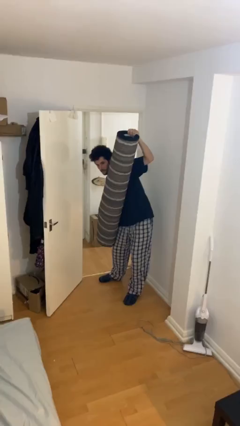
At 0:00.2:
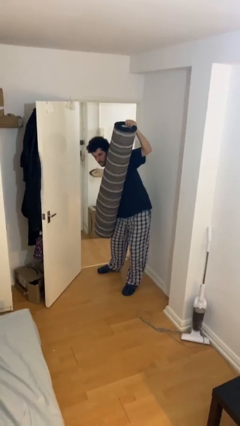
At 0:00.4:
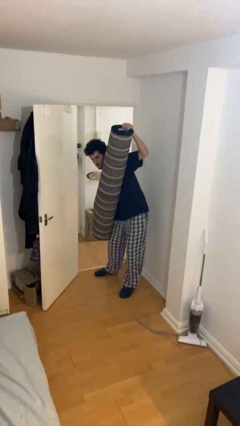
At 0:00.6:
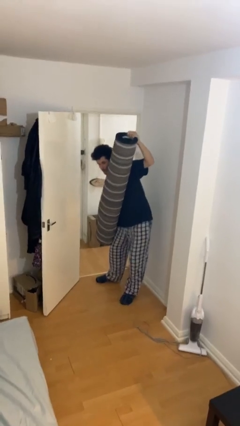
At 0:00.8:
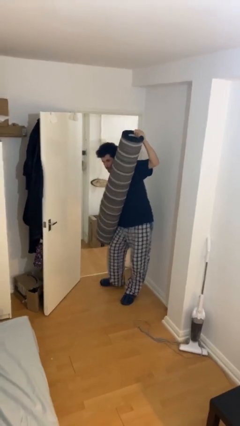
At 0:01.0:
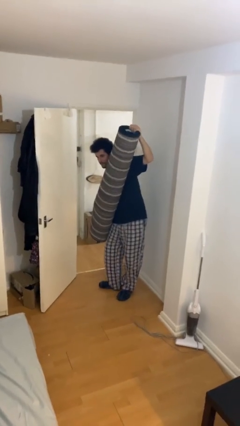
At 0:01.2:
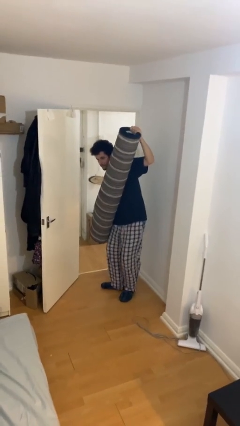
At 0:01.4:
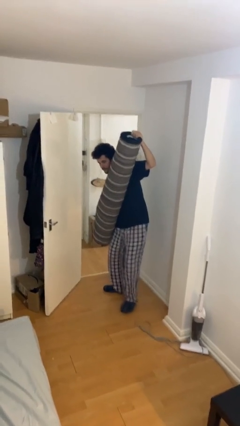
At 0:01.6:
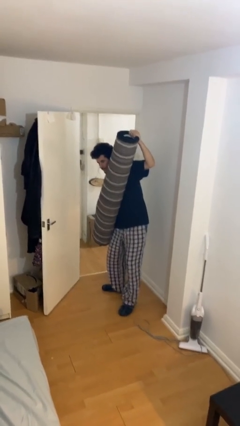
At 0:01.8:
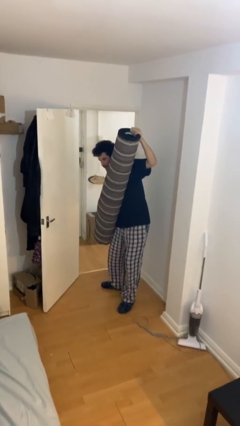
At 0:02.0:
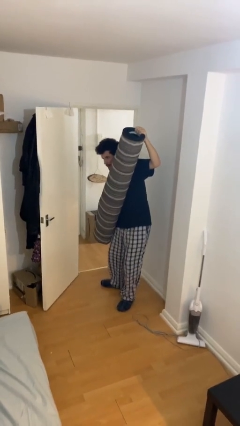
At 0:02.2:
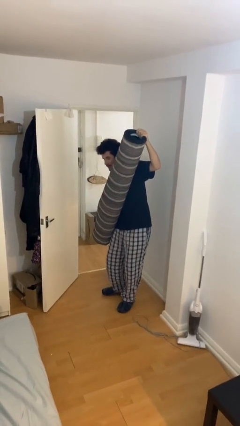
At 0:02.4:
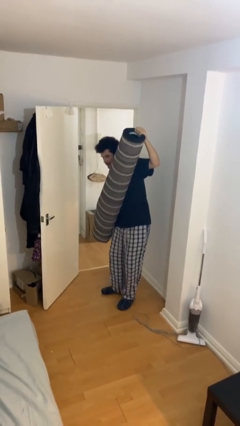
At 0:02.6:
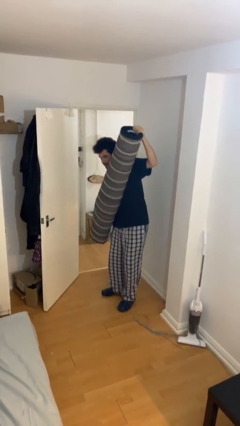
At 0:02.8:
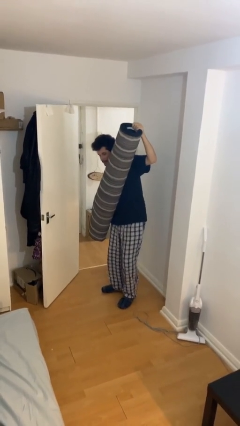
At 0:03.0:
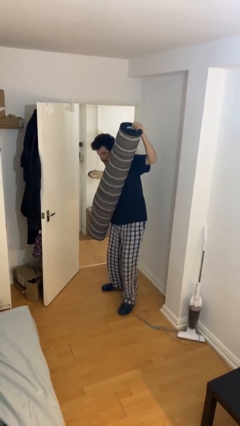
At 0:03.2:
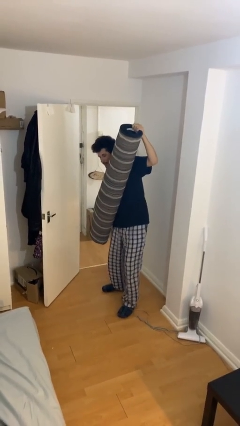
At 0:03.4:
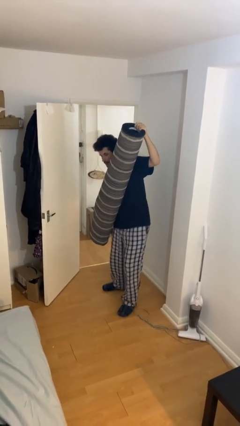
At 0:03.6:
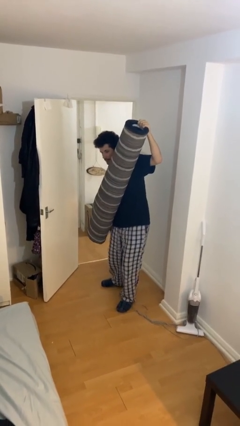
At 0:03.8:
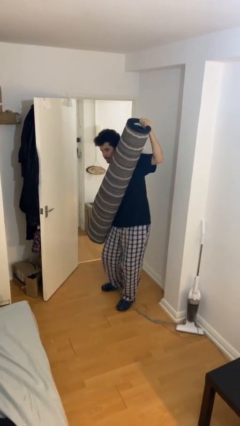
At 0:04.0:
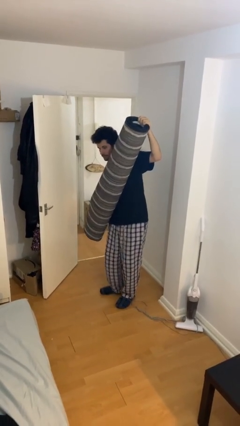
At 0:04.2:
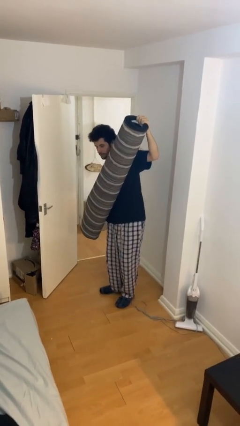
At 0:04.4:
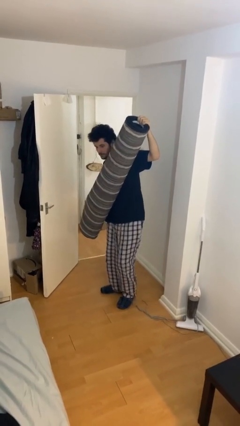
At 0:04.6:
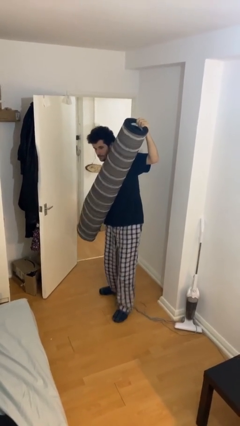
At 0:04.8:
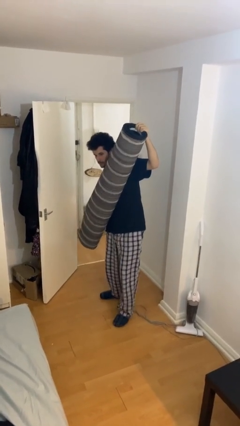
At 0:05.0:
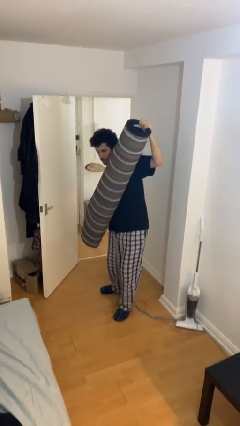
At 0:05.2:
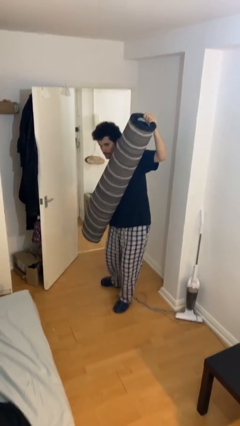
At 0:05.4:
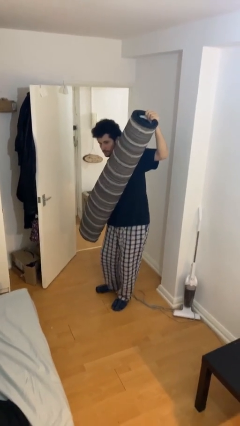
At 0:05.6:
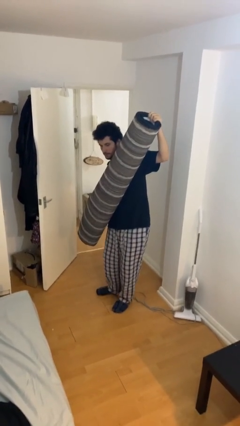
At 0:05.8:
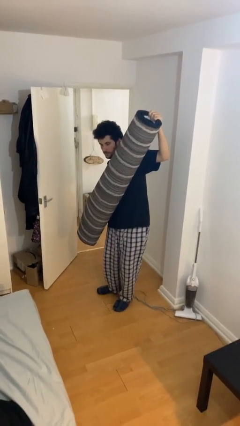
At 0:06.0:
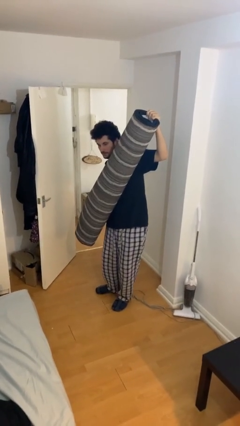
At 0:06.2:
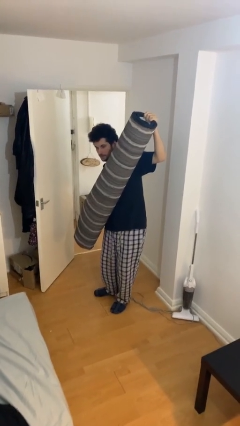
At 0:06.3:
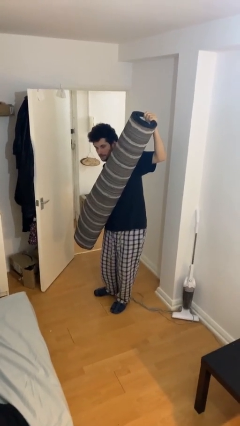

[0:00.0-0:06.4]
person carries heavy object

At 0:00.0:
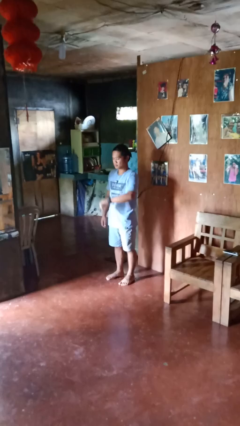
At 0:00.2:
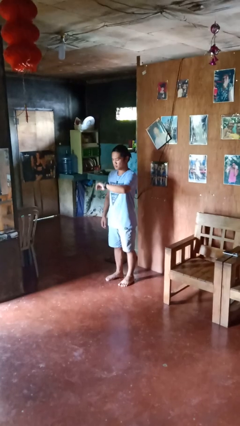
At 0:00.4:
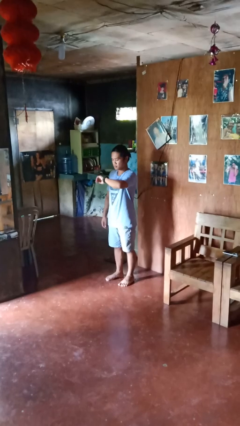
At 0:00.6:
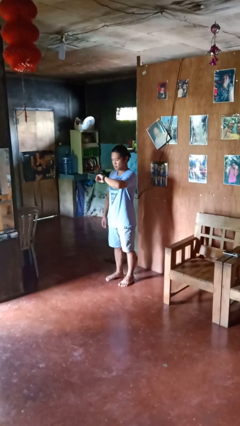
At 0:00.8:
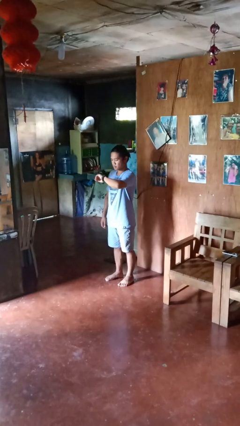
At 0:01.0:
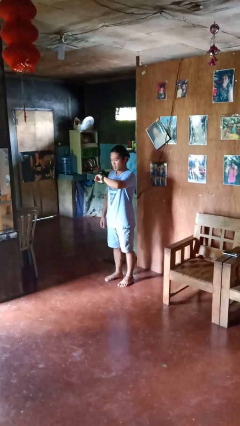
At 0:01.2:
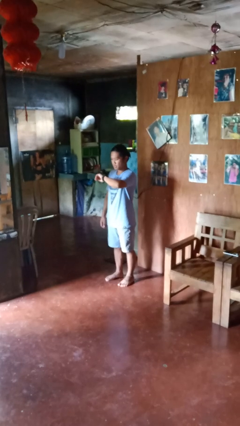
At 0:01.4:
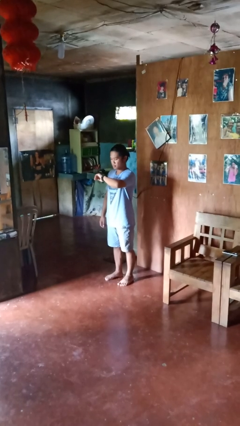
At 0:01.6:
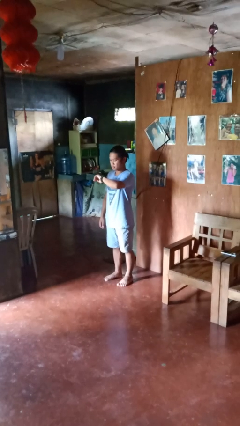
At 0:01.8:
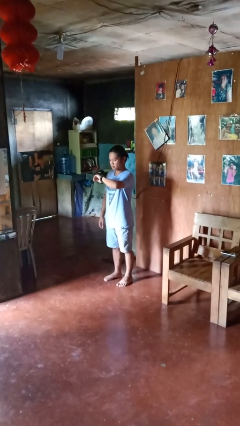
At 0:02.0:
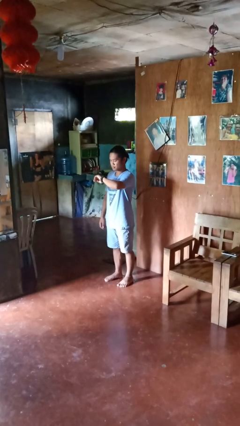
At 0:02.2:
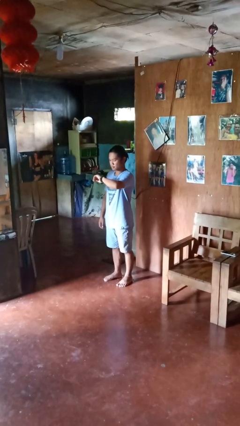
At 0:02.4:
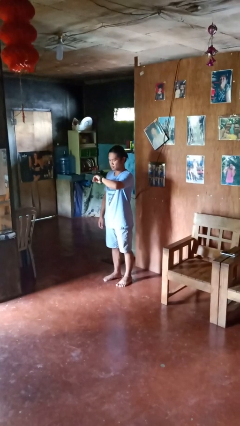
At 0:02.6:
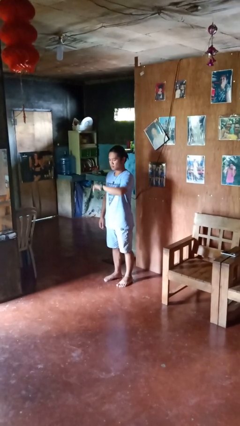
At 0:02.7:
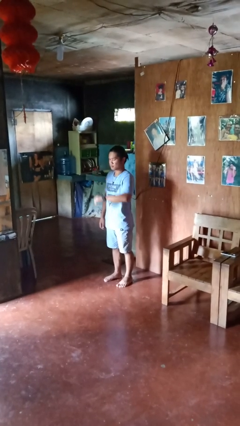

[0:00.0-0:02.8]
person looks at wristwatch

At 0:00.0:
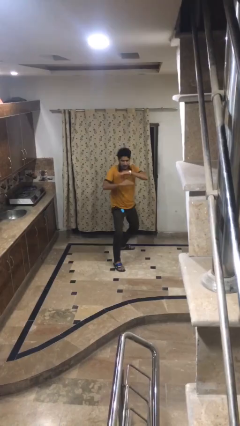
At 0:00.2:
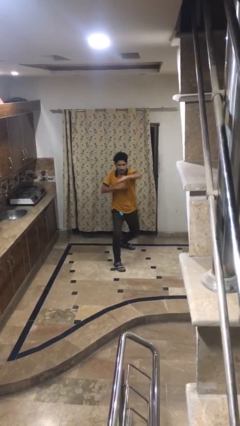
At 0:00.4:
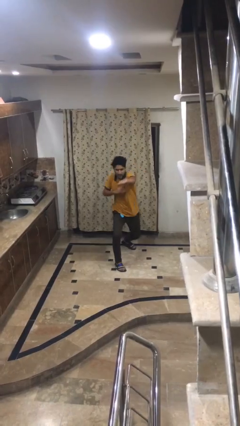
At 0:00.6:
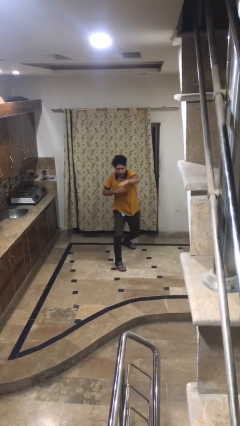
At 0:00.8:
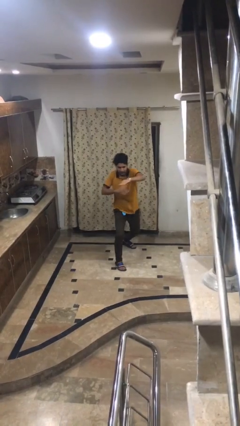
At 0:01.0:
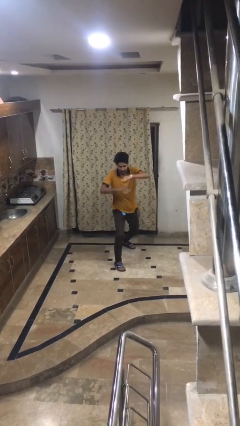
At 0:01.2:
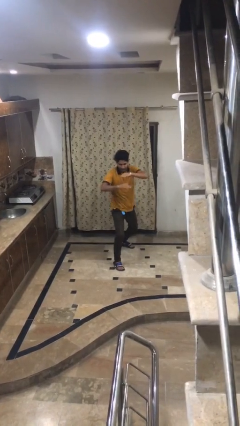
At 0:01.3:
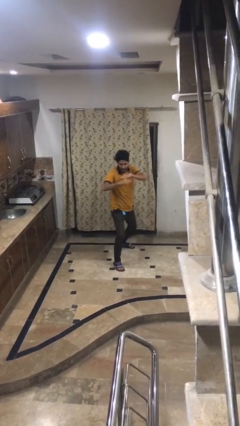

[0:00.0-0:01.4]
person karate chop

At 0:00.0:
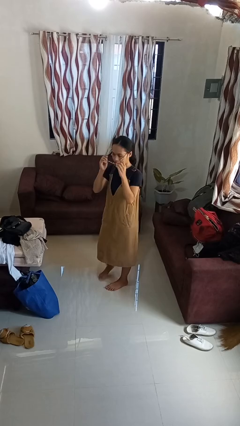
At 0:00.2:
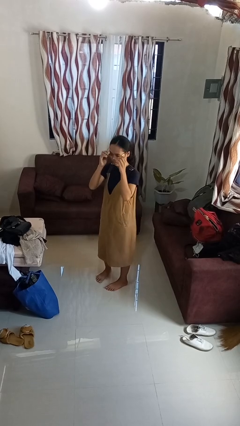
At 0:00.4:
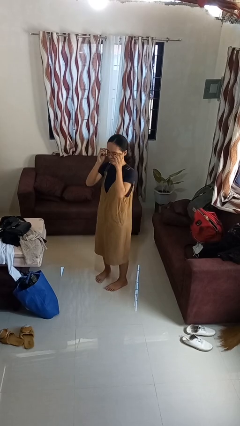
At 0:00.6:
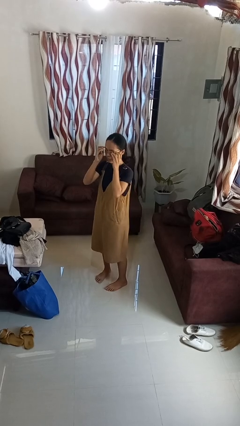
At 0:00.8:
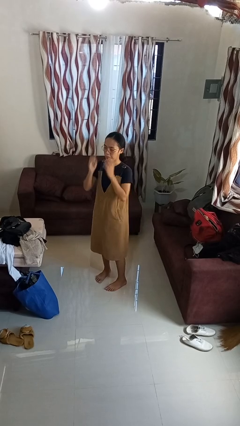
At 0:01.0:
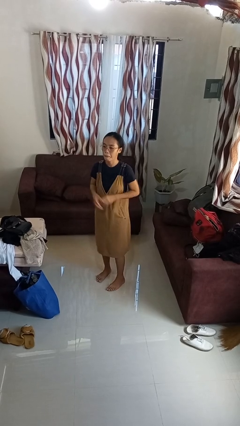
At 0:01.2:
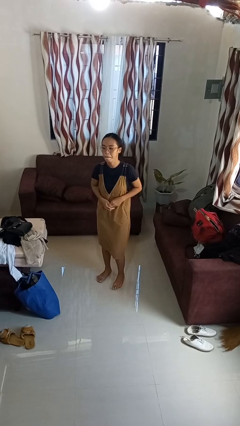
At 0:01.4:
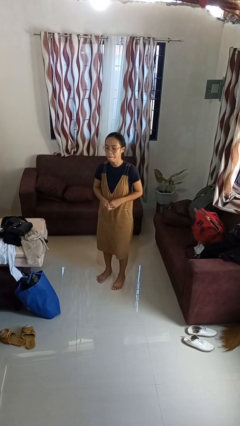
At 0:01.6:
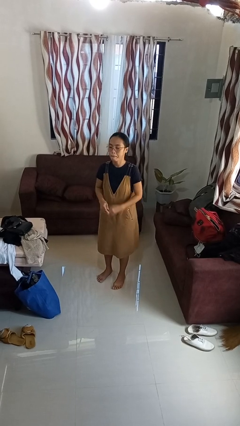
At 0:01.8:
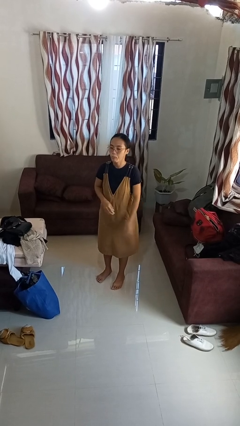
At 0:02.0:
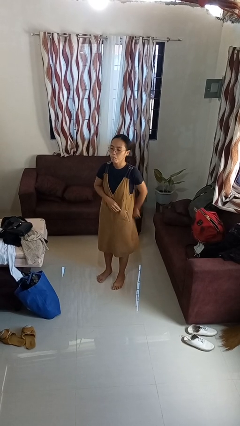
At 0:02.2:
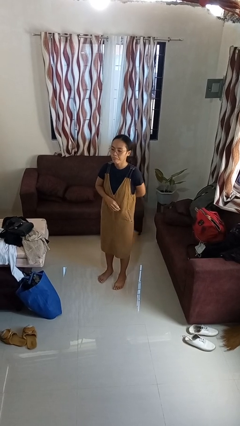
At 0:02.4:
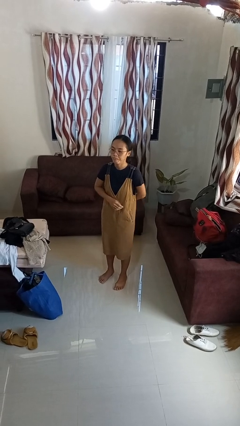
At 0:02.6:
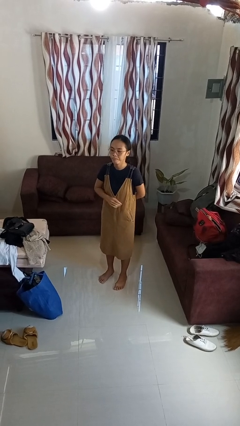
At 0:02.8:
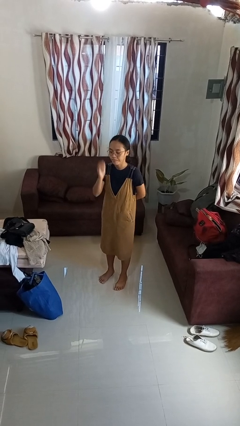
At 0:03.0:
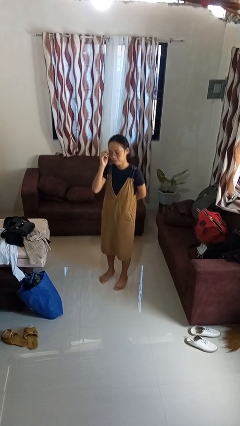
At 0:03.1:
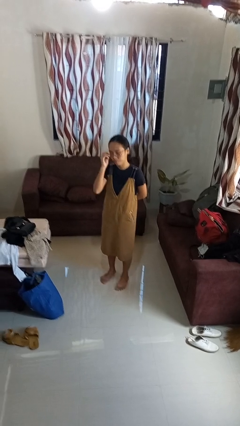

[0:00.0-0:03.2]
person puts on glasses

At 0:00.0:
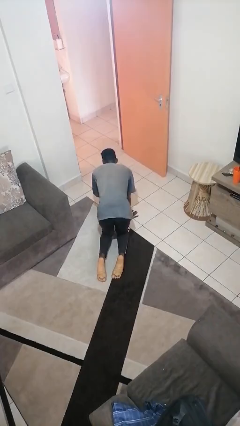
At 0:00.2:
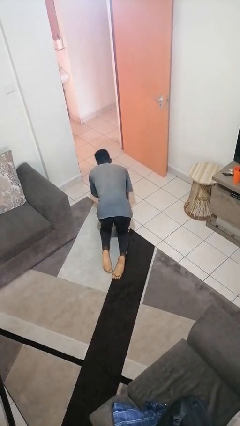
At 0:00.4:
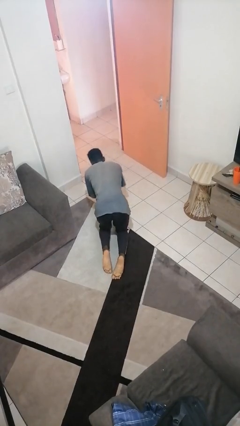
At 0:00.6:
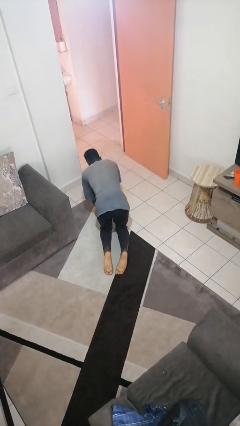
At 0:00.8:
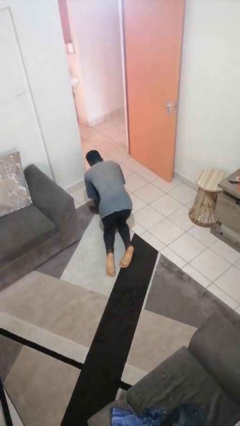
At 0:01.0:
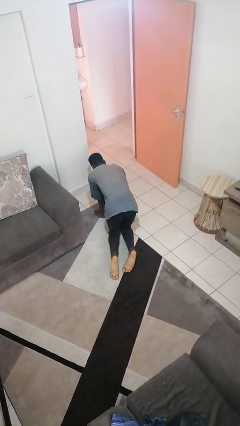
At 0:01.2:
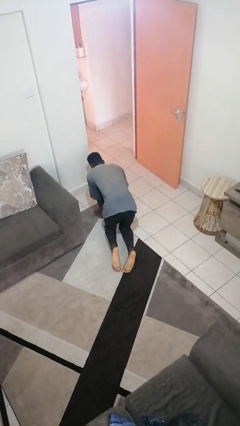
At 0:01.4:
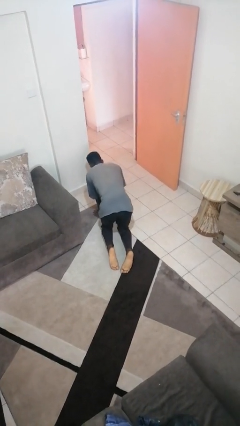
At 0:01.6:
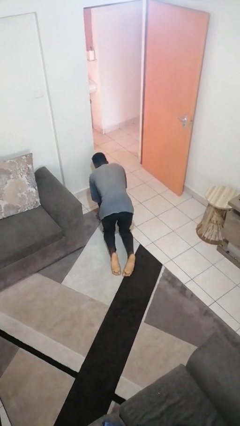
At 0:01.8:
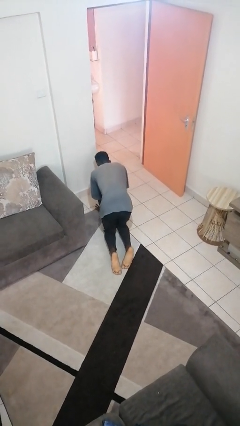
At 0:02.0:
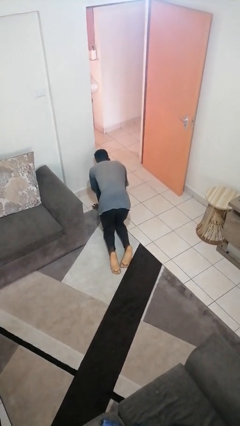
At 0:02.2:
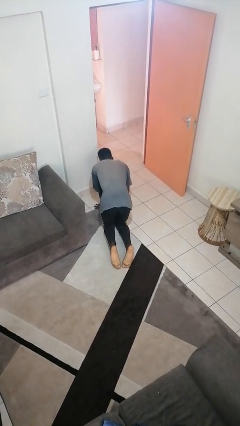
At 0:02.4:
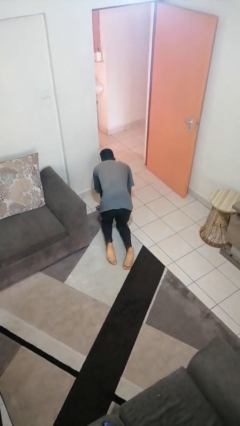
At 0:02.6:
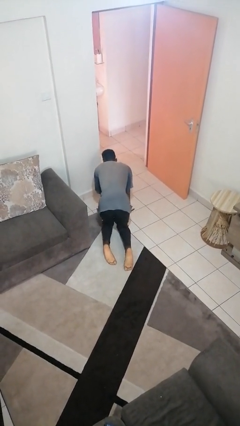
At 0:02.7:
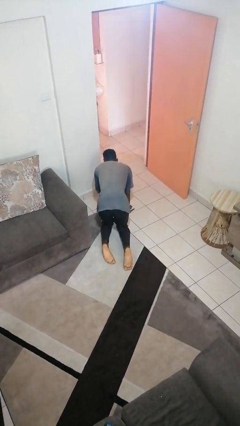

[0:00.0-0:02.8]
person crawls

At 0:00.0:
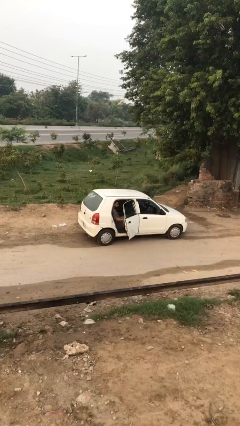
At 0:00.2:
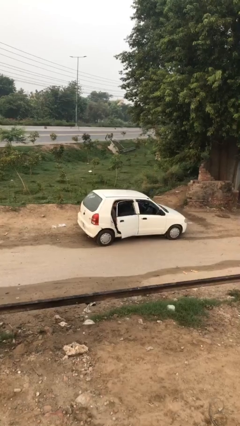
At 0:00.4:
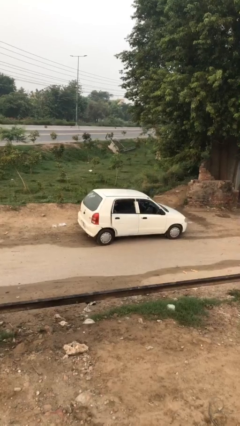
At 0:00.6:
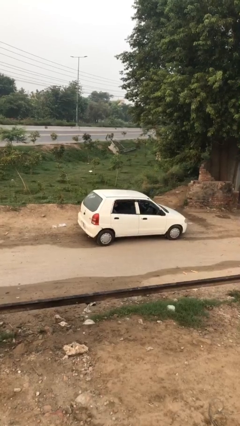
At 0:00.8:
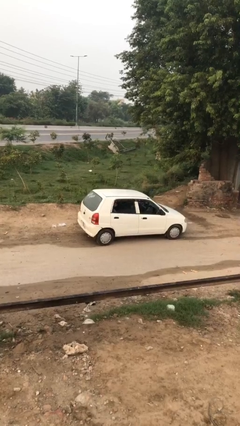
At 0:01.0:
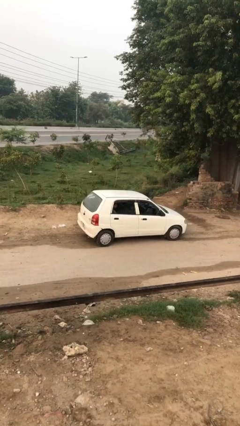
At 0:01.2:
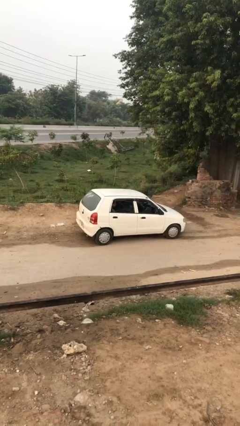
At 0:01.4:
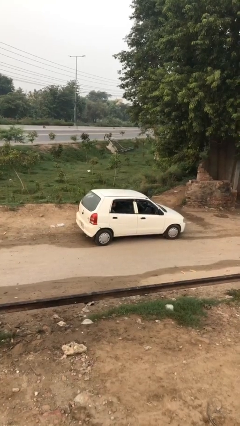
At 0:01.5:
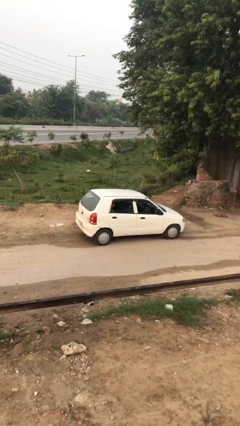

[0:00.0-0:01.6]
person closes car door
